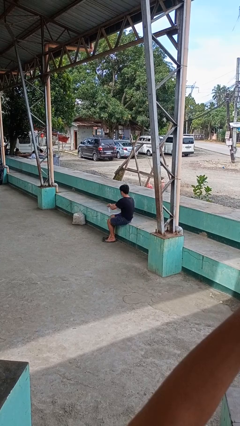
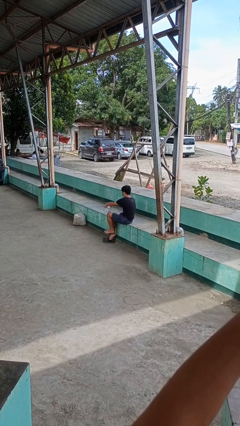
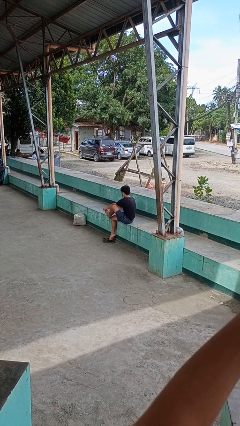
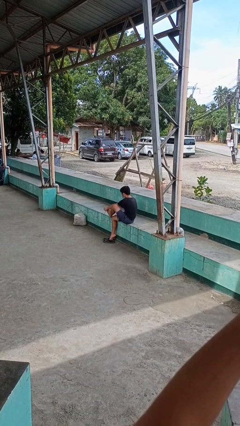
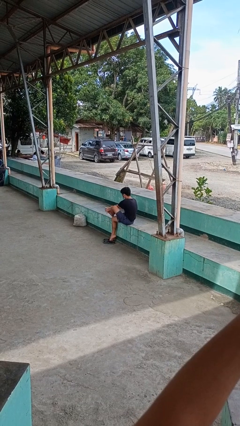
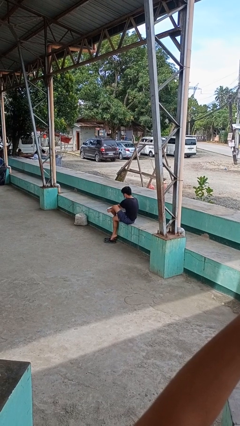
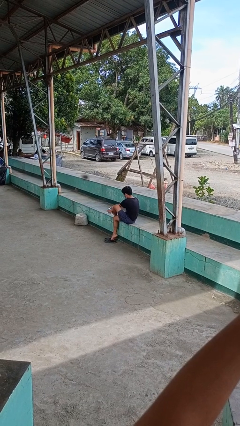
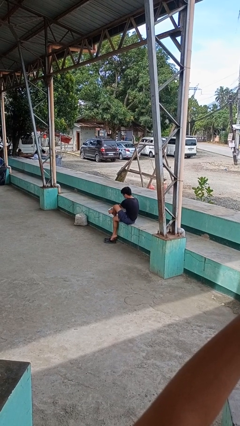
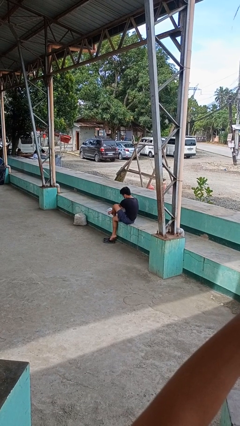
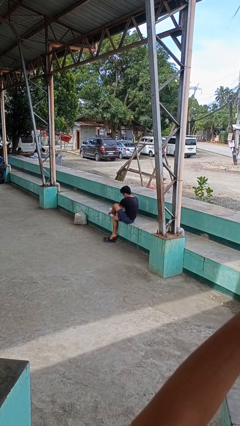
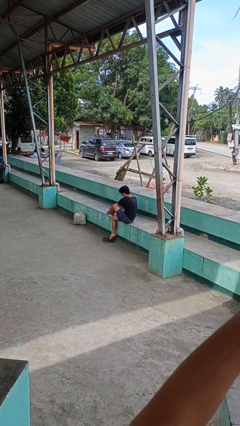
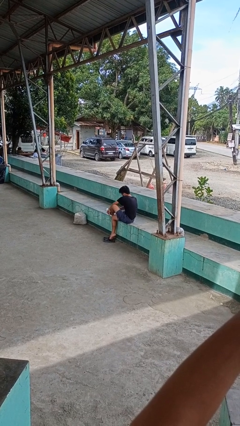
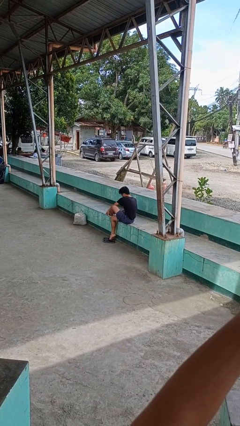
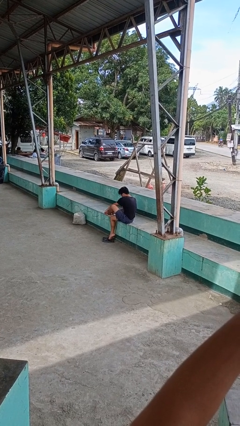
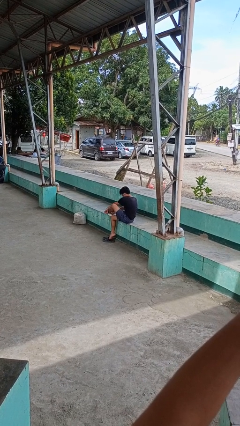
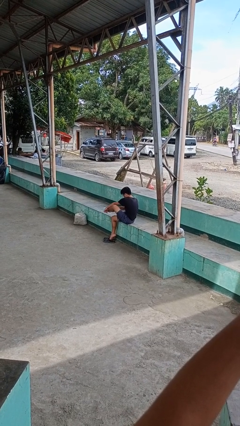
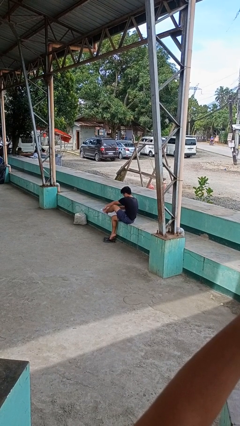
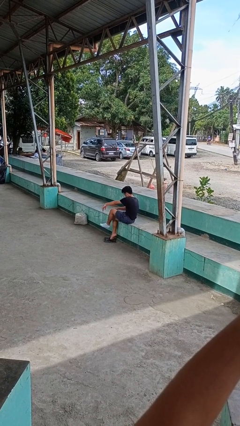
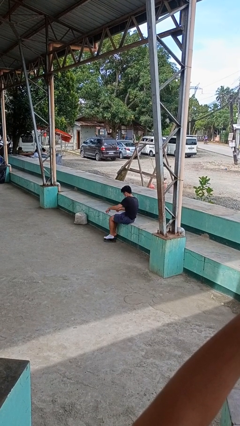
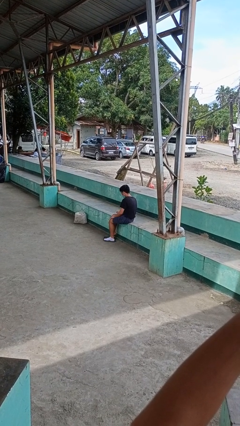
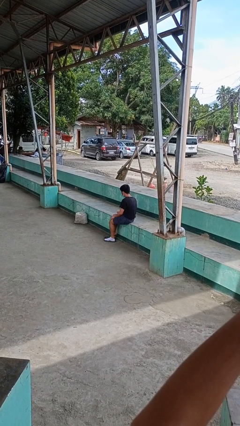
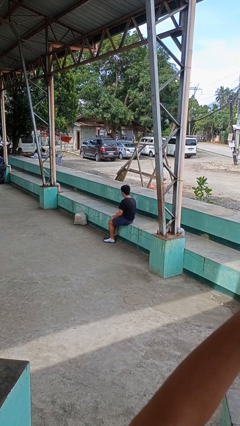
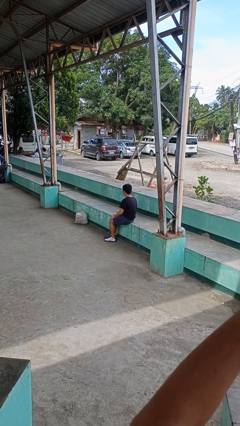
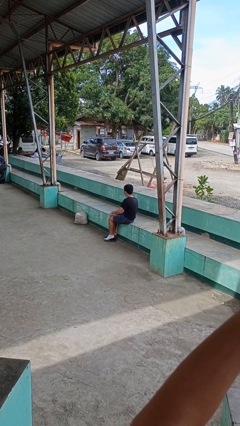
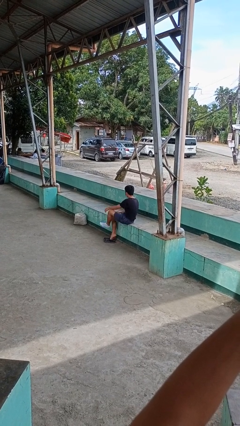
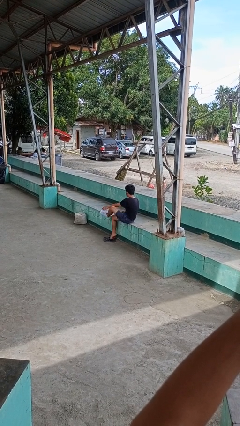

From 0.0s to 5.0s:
person puts on socks

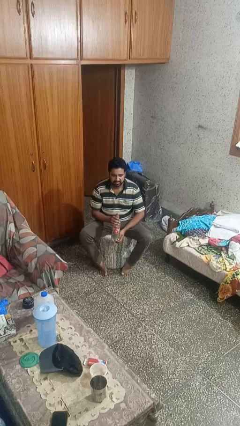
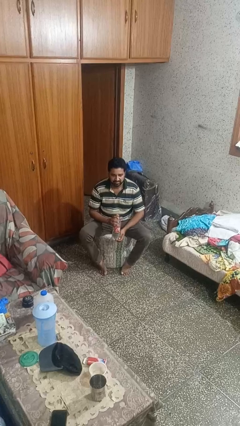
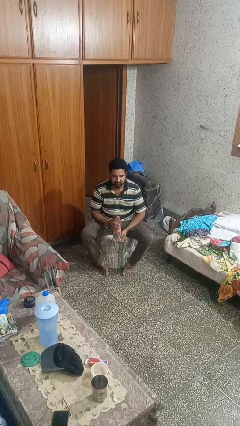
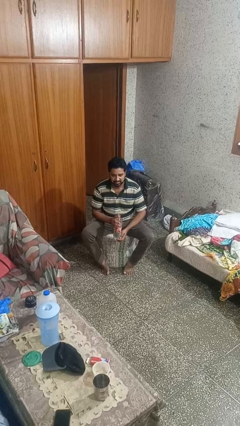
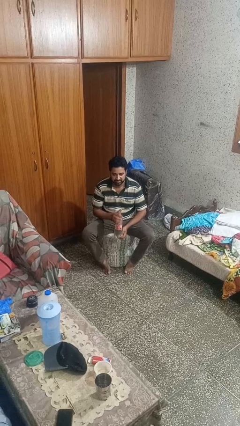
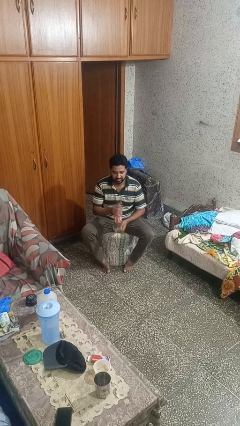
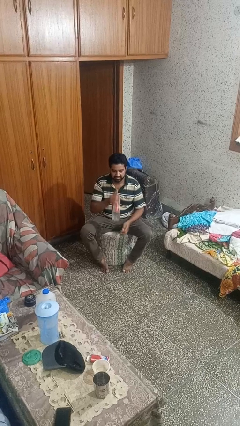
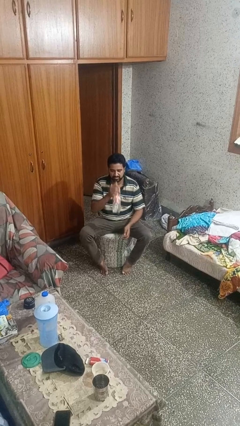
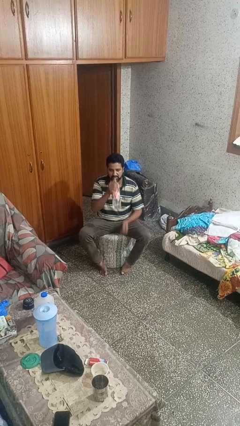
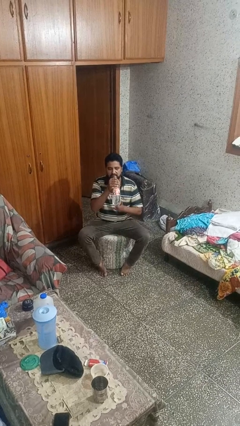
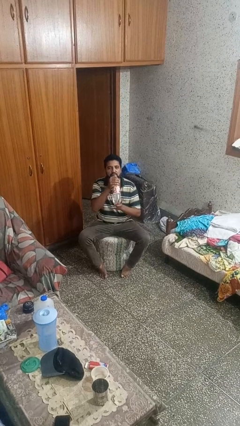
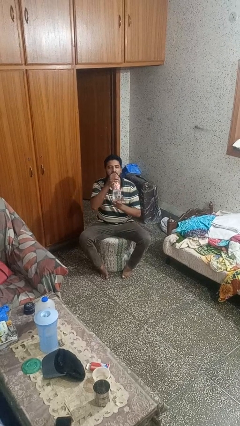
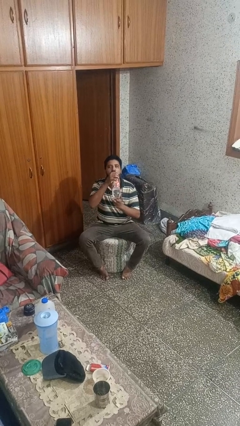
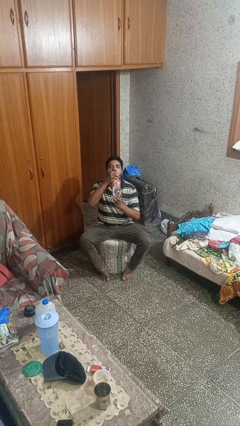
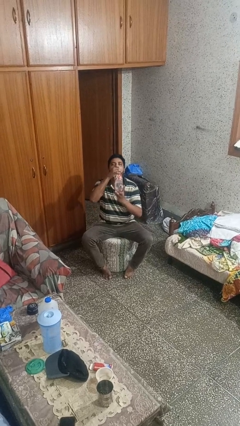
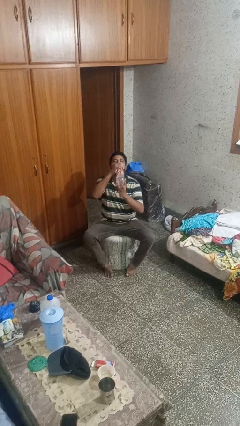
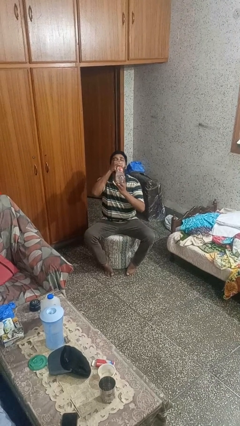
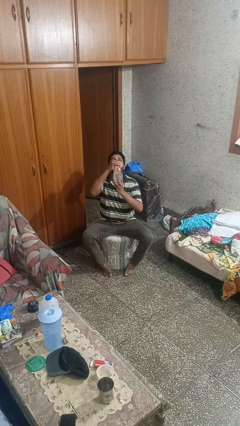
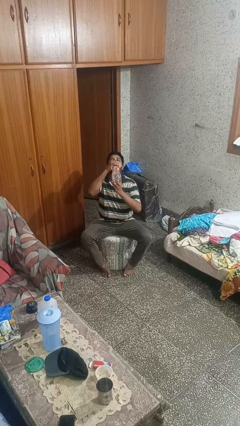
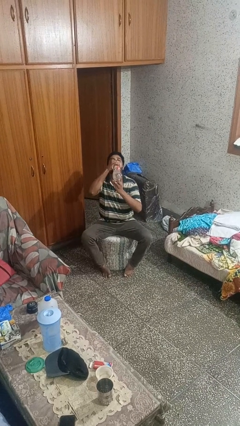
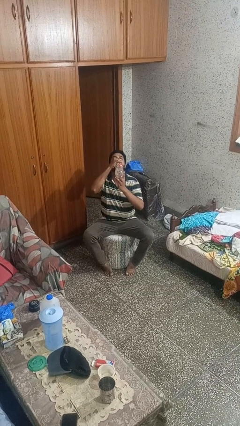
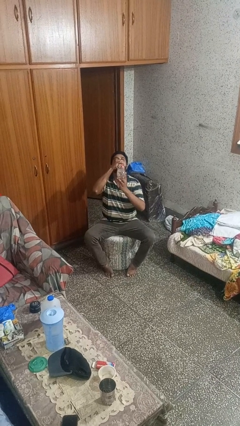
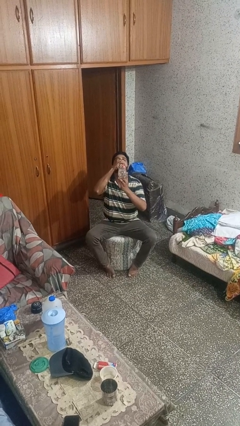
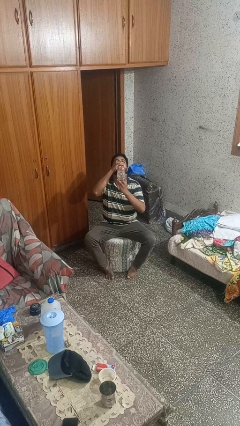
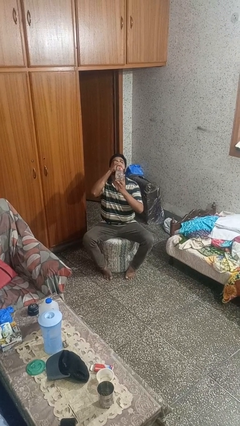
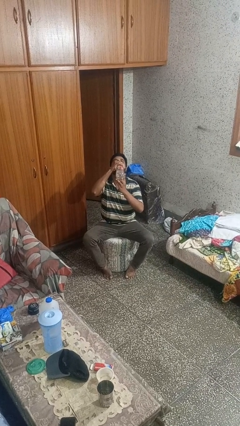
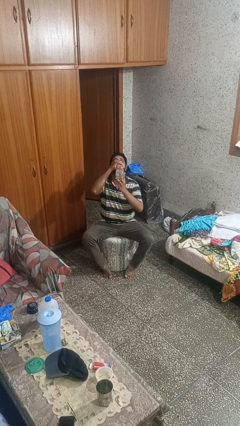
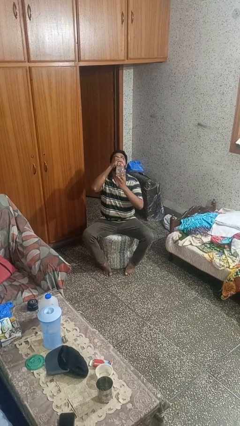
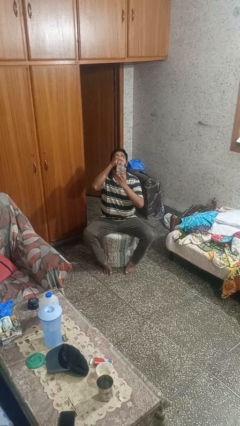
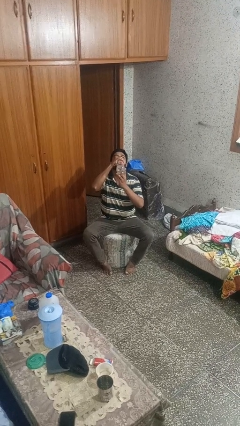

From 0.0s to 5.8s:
person drinks from bottle

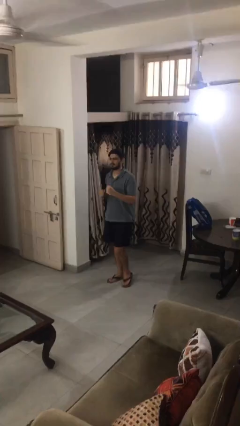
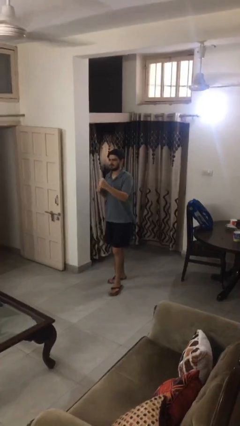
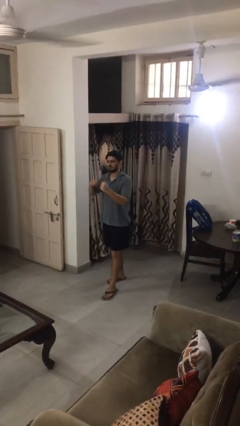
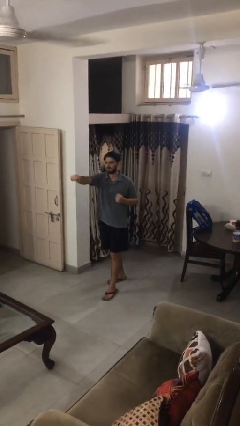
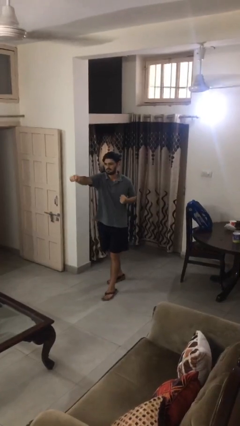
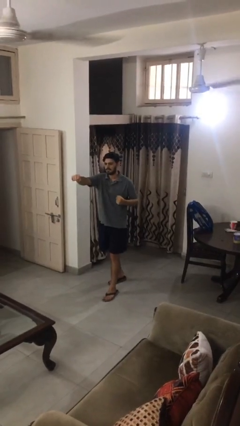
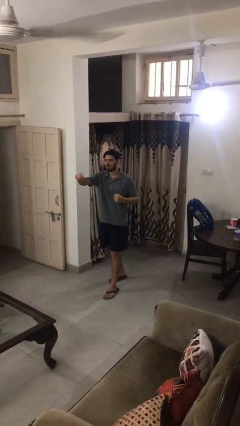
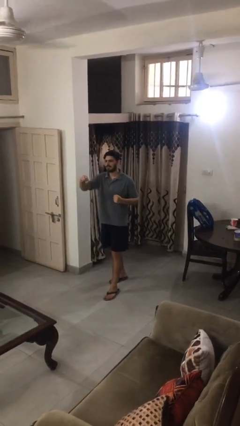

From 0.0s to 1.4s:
person punches

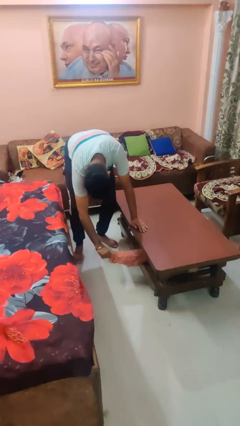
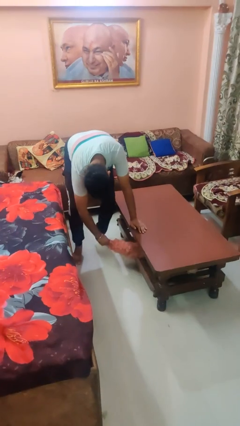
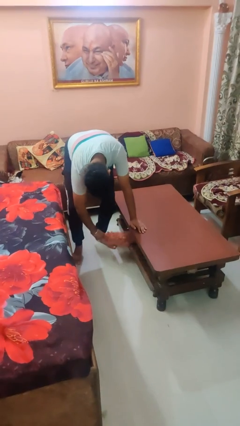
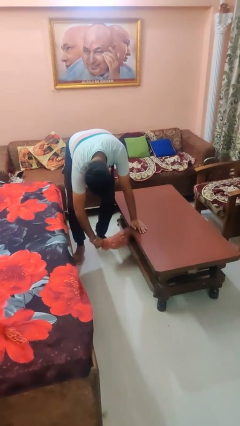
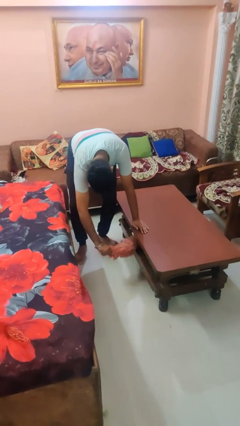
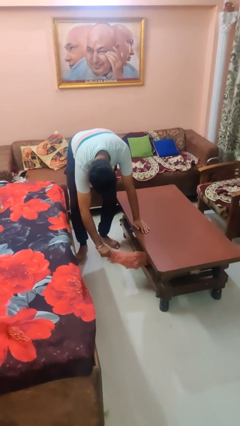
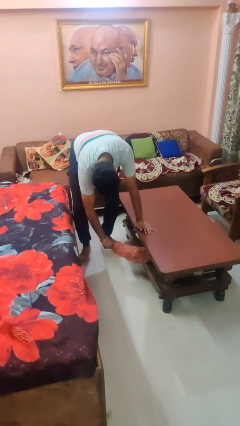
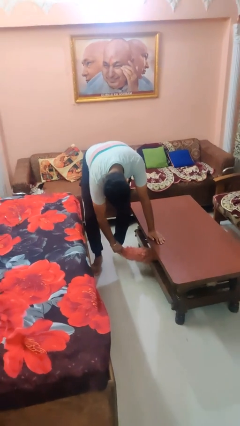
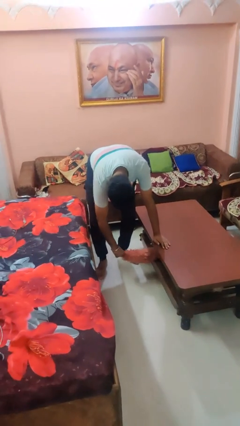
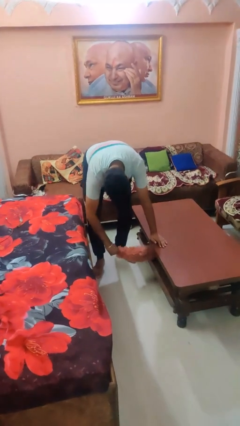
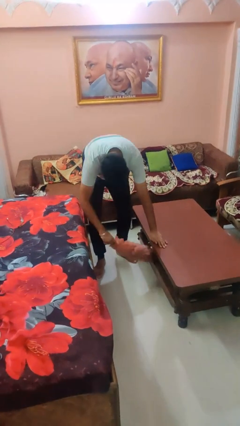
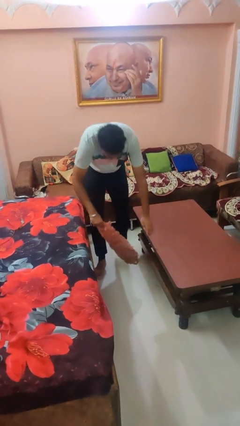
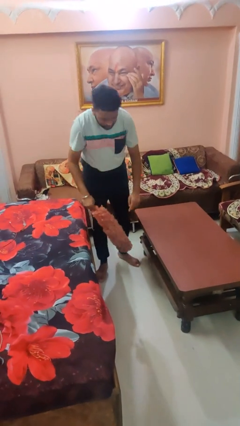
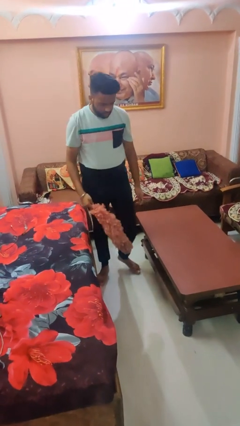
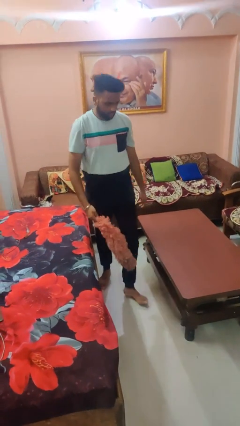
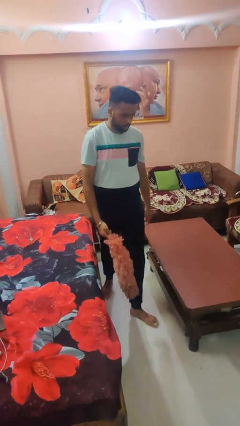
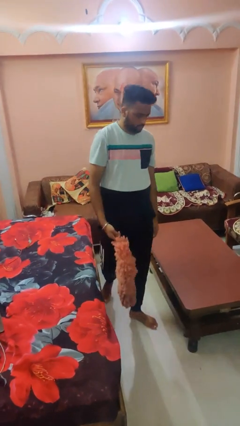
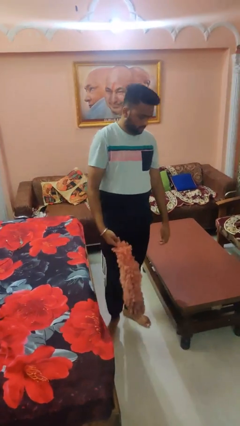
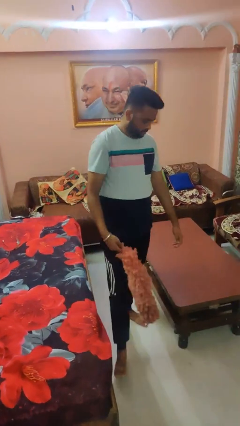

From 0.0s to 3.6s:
person dusts furniture

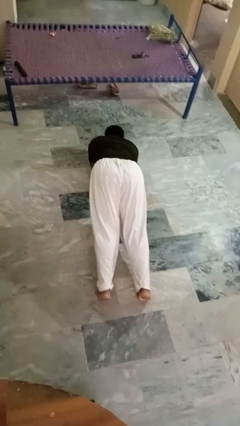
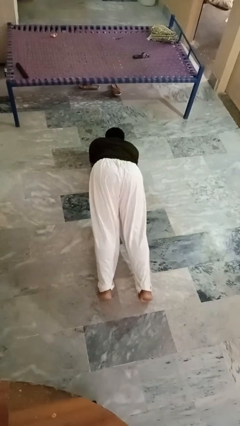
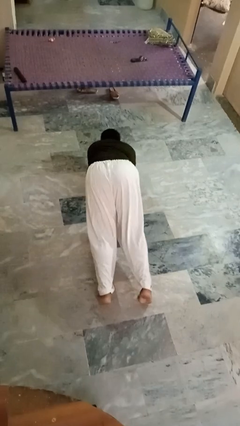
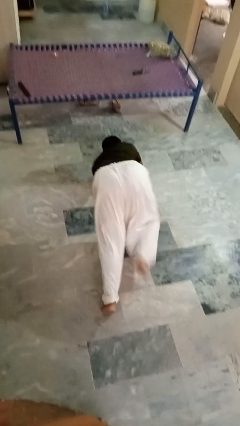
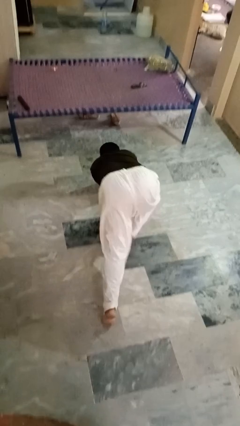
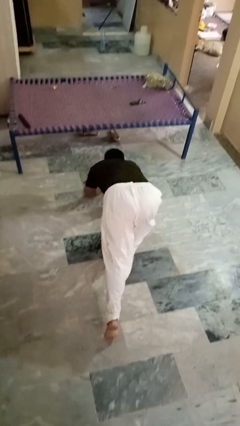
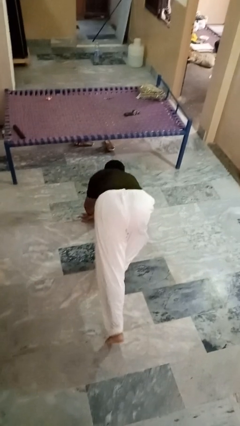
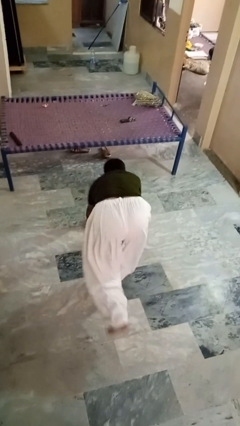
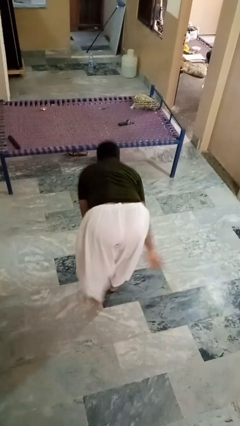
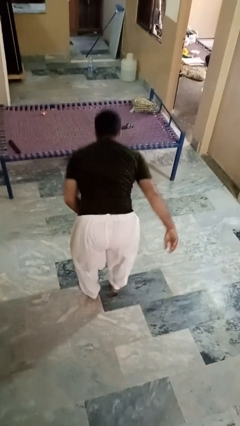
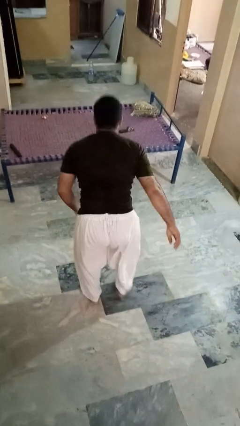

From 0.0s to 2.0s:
person stands up from floor
